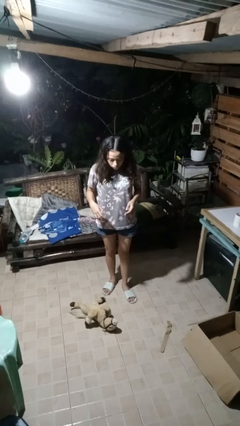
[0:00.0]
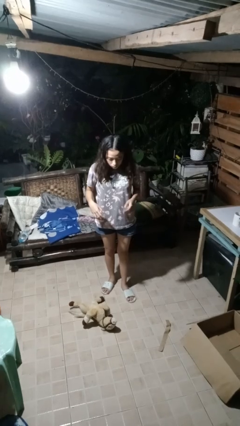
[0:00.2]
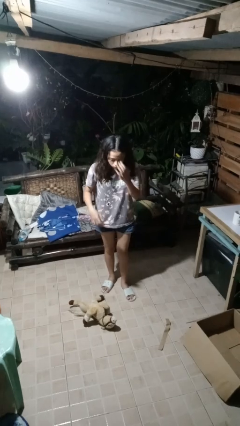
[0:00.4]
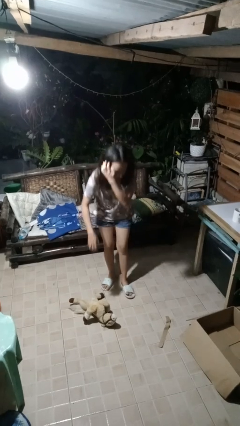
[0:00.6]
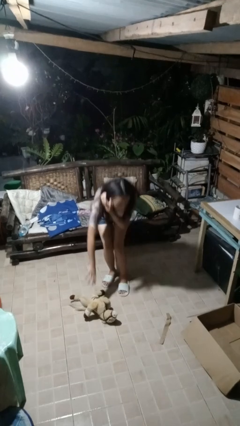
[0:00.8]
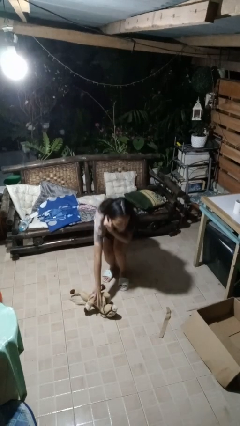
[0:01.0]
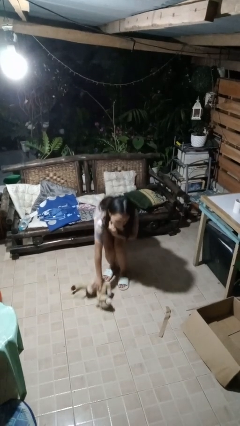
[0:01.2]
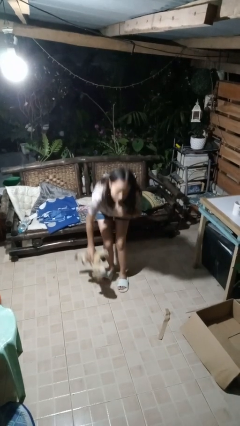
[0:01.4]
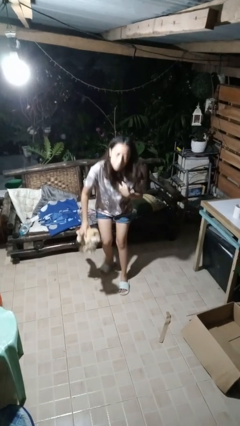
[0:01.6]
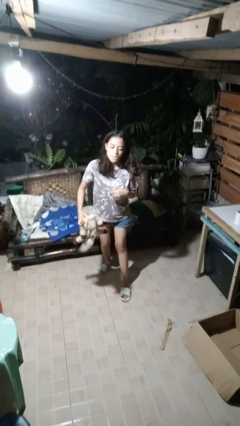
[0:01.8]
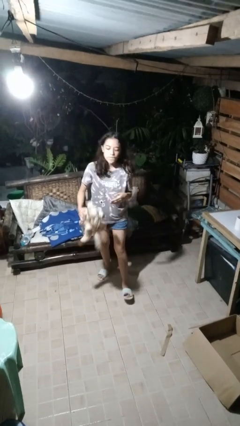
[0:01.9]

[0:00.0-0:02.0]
person picks up object from floor

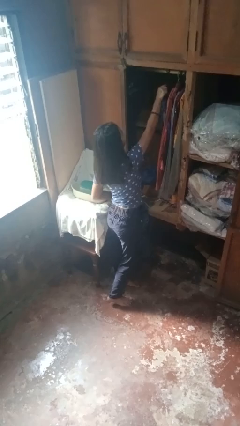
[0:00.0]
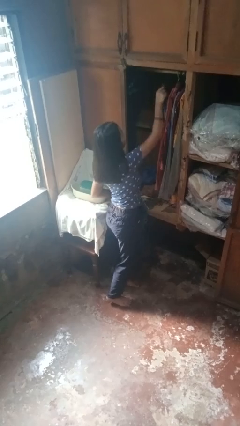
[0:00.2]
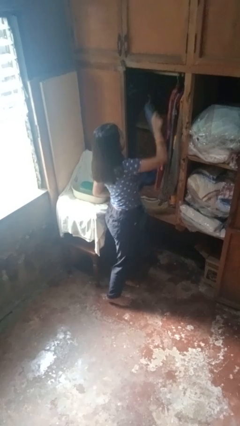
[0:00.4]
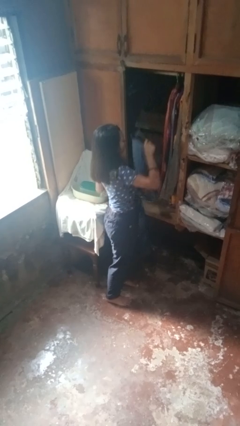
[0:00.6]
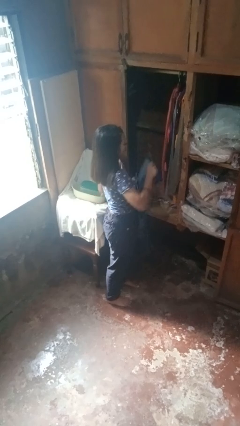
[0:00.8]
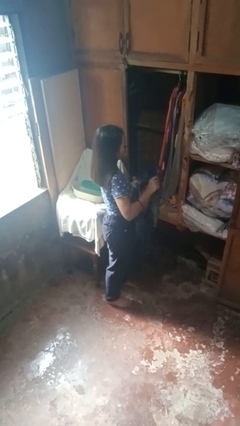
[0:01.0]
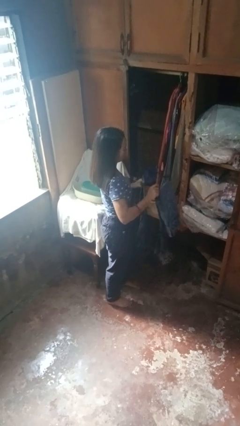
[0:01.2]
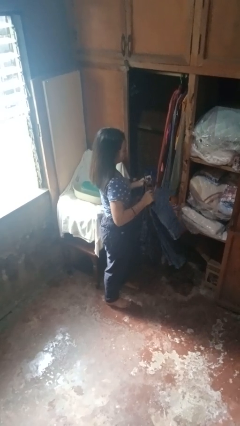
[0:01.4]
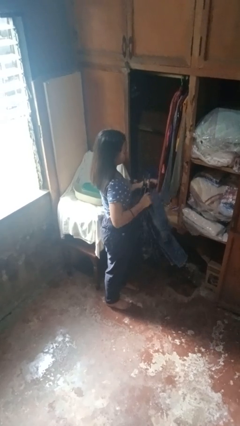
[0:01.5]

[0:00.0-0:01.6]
person takes clothes from closet

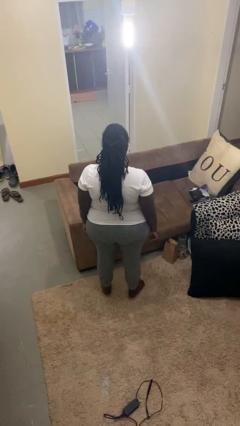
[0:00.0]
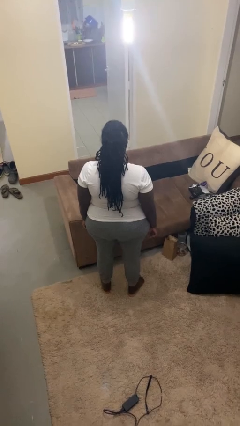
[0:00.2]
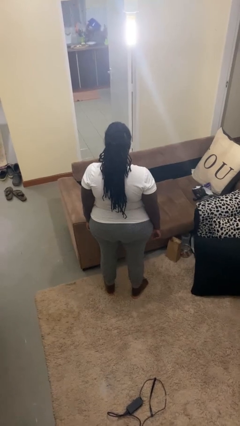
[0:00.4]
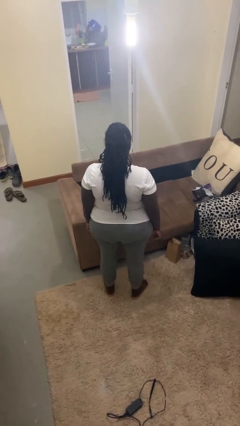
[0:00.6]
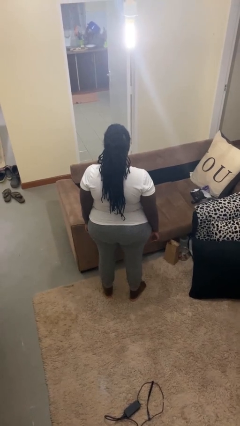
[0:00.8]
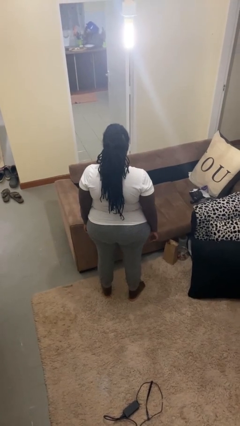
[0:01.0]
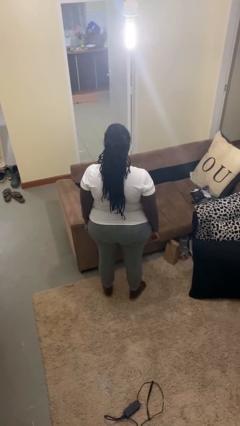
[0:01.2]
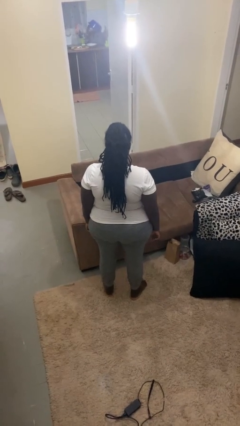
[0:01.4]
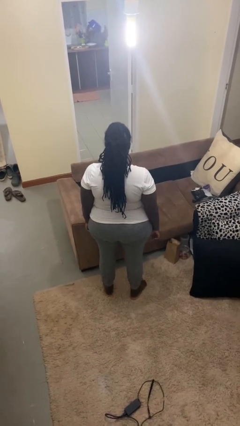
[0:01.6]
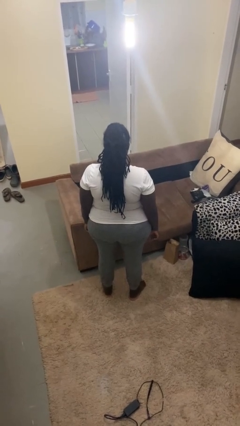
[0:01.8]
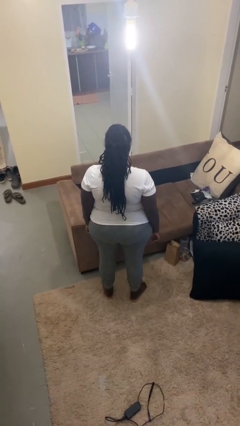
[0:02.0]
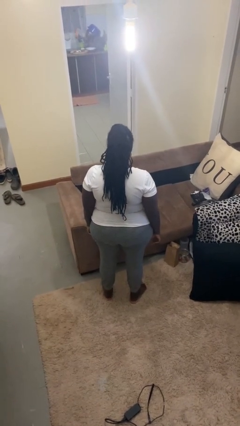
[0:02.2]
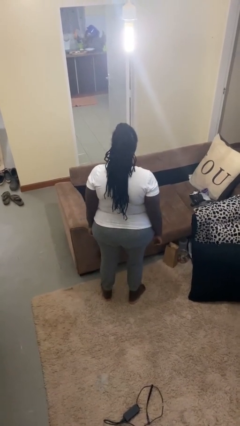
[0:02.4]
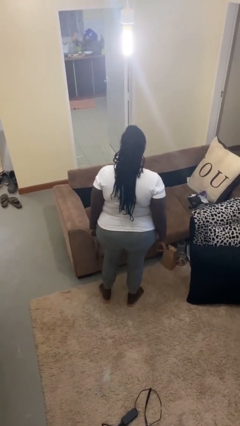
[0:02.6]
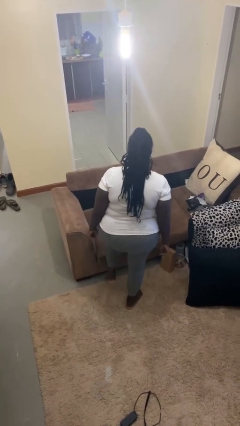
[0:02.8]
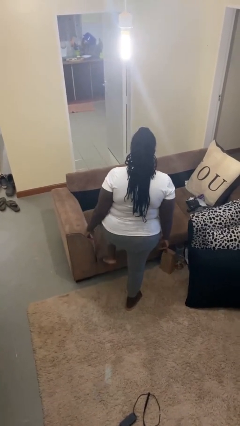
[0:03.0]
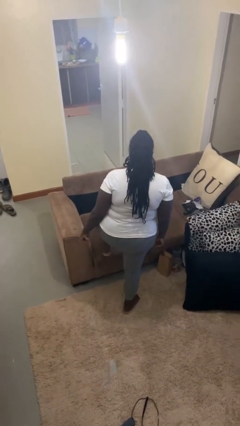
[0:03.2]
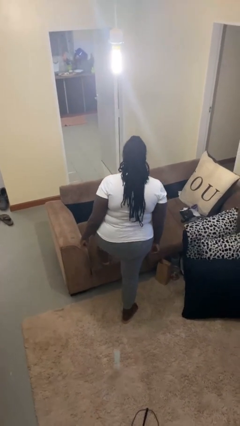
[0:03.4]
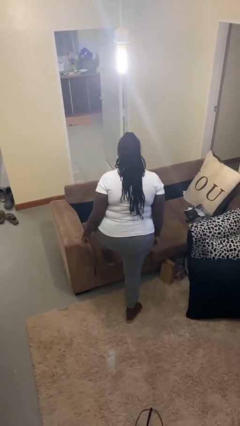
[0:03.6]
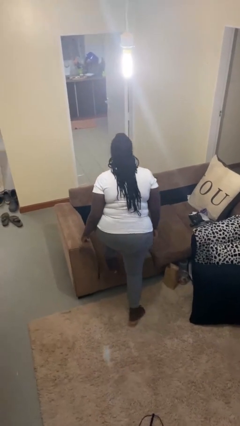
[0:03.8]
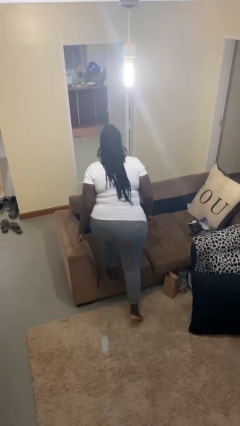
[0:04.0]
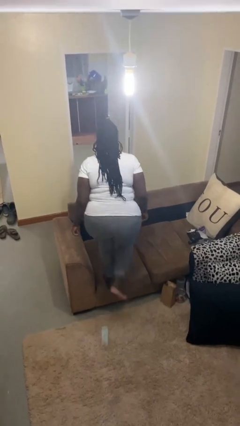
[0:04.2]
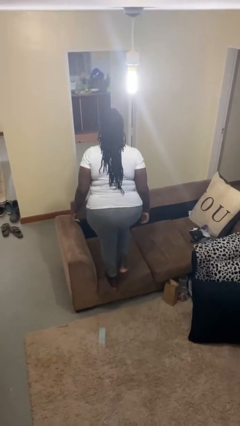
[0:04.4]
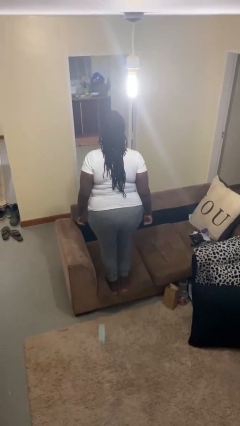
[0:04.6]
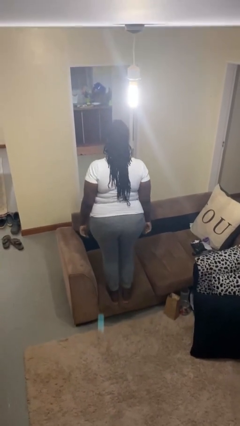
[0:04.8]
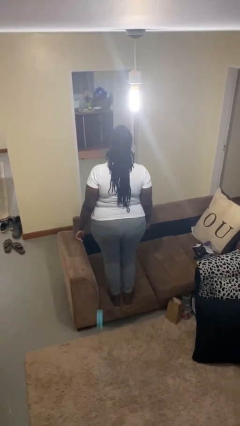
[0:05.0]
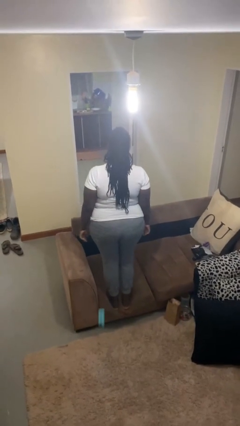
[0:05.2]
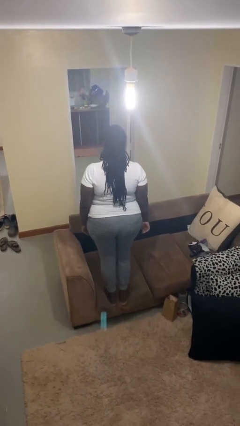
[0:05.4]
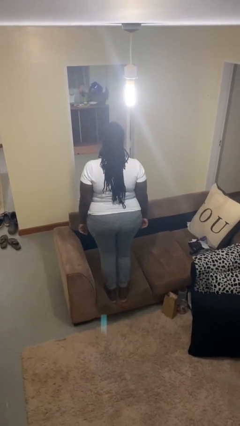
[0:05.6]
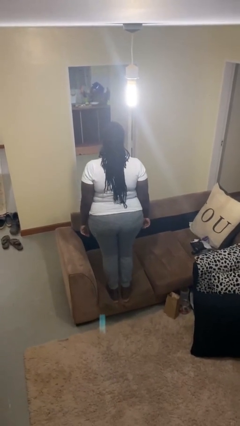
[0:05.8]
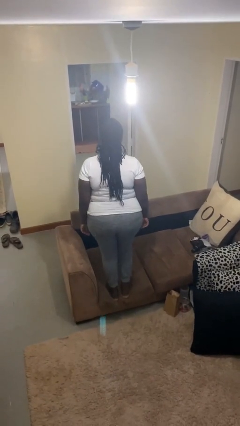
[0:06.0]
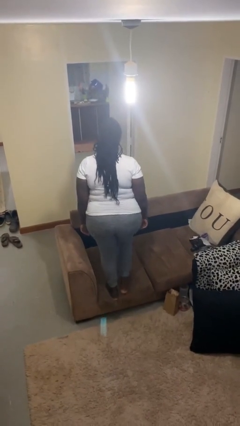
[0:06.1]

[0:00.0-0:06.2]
person climbs on couch

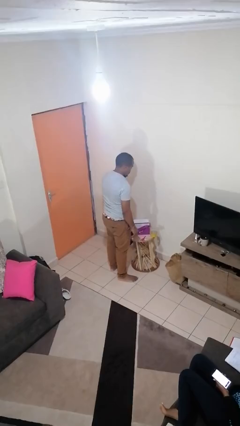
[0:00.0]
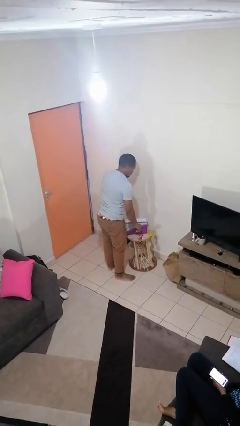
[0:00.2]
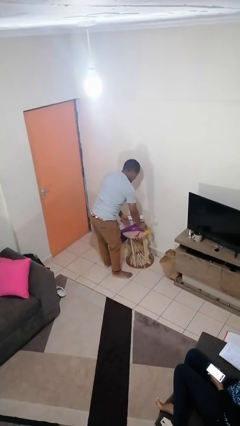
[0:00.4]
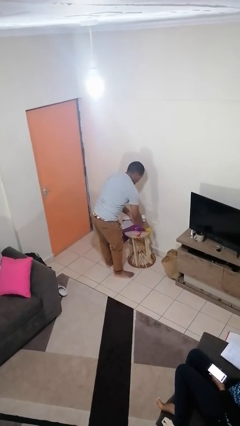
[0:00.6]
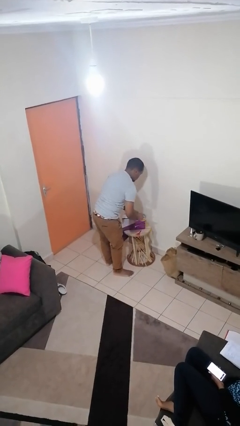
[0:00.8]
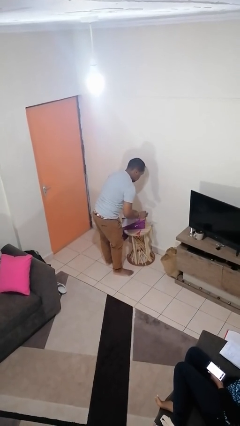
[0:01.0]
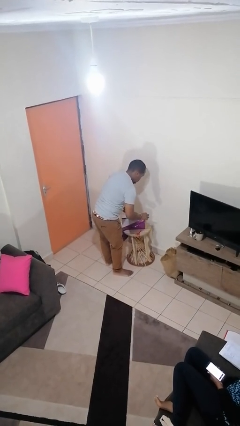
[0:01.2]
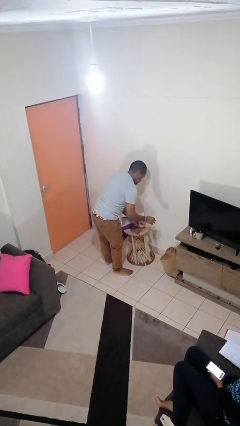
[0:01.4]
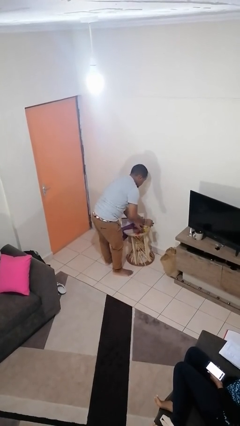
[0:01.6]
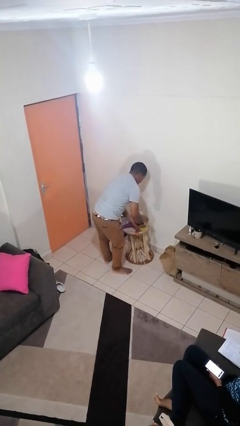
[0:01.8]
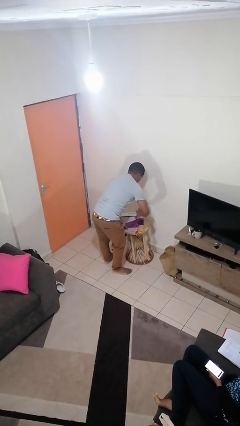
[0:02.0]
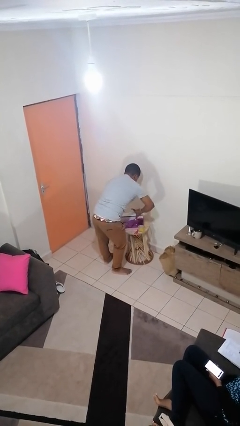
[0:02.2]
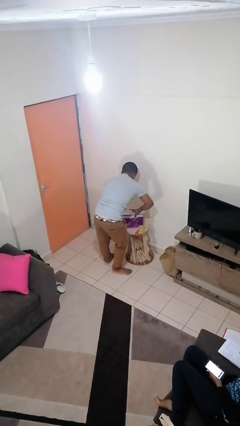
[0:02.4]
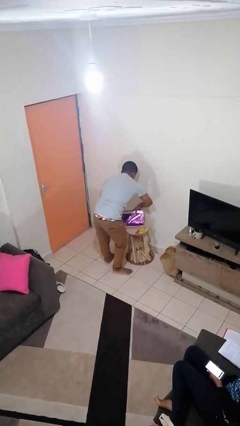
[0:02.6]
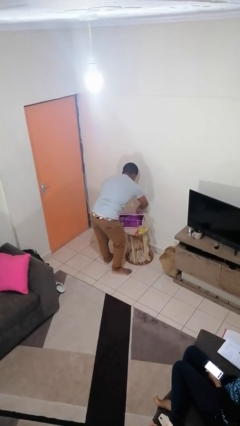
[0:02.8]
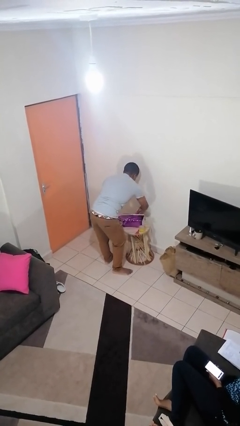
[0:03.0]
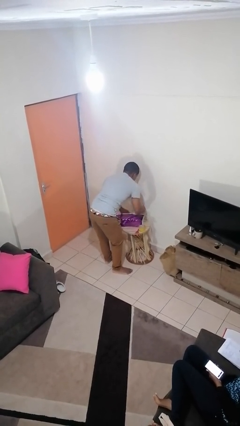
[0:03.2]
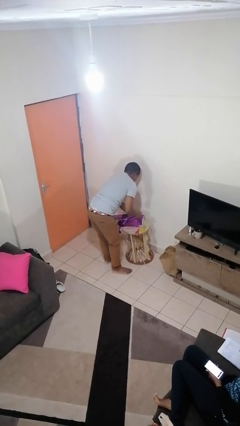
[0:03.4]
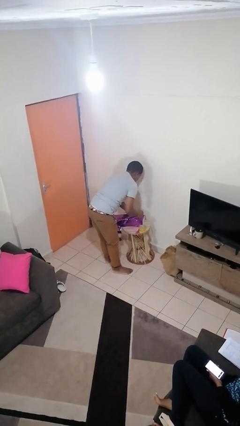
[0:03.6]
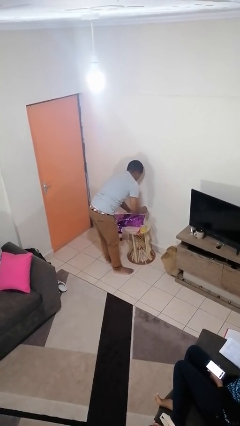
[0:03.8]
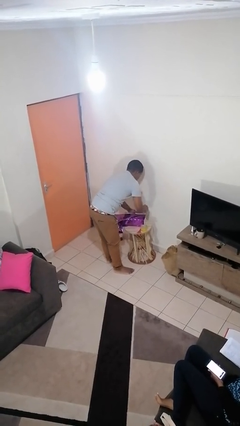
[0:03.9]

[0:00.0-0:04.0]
person wraps box

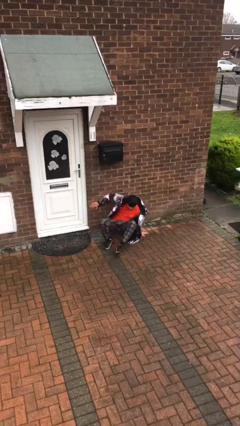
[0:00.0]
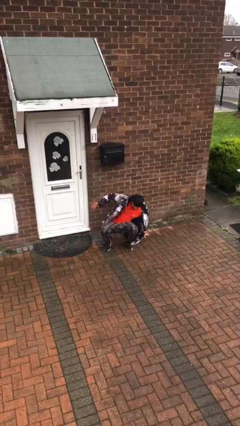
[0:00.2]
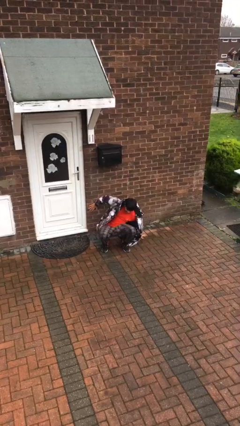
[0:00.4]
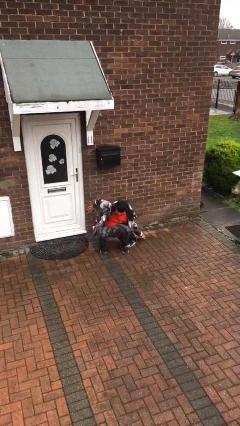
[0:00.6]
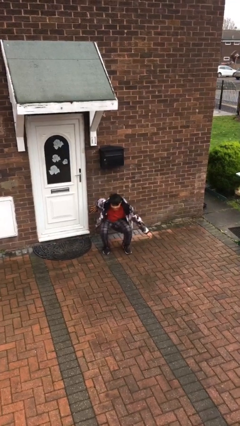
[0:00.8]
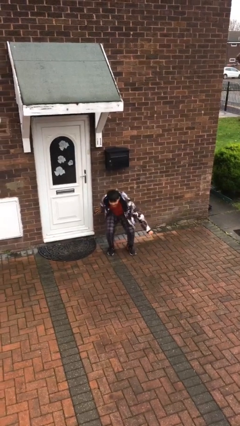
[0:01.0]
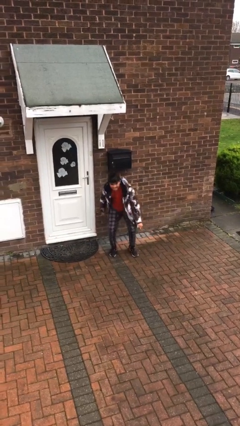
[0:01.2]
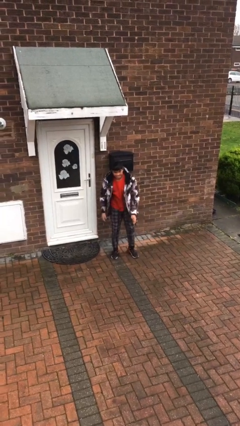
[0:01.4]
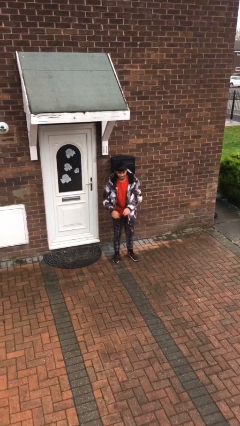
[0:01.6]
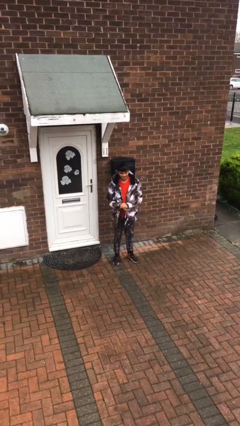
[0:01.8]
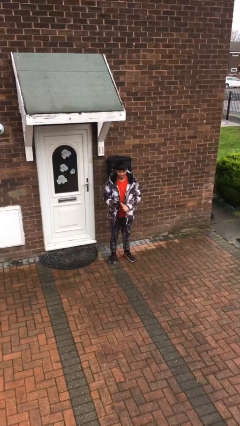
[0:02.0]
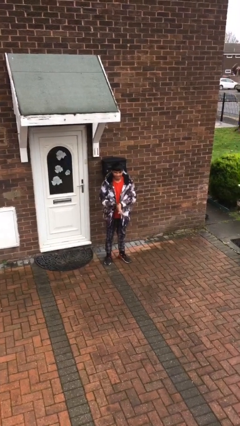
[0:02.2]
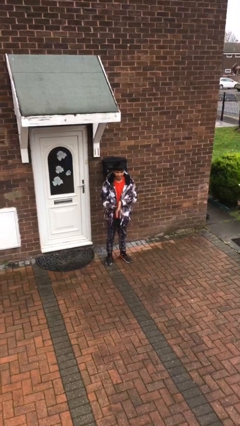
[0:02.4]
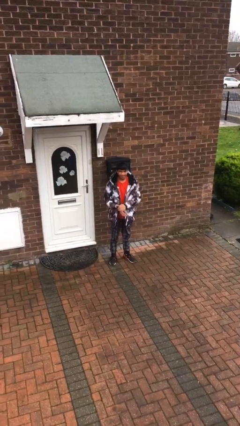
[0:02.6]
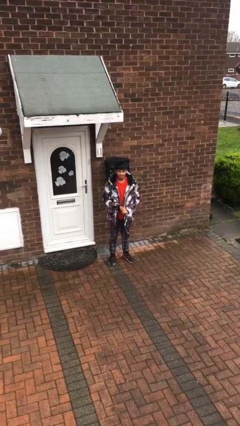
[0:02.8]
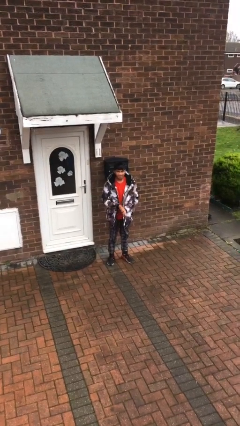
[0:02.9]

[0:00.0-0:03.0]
person stands up

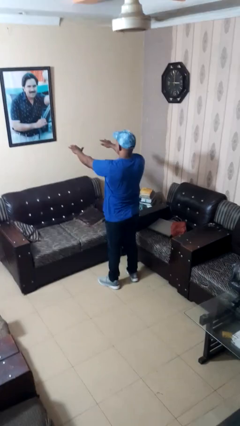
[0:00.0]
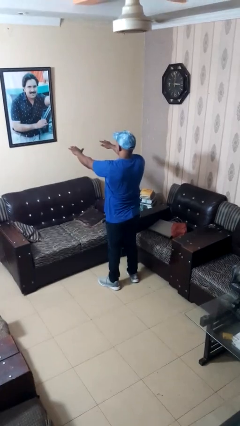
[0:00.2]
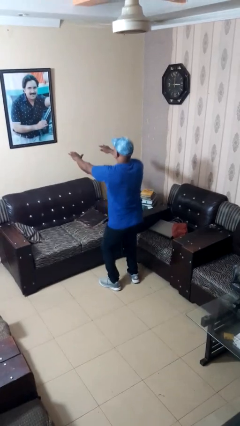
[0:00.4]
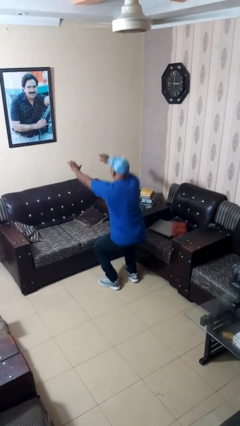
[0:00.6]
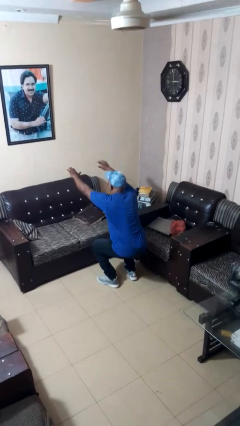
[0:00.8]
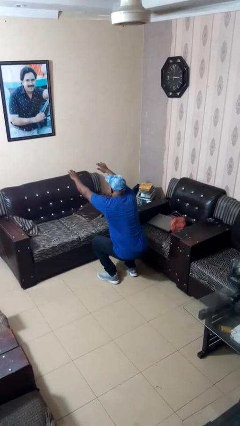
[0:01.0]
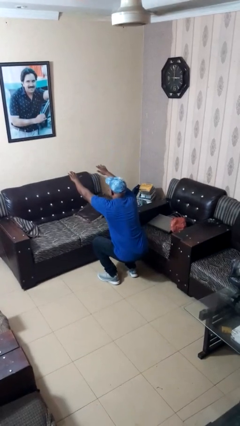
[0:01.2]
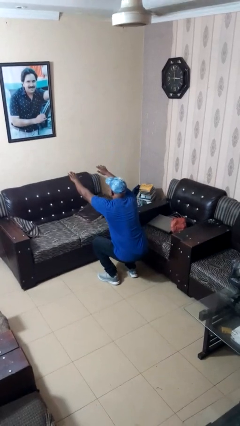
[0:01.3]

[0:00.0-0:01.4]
person squats
